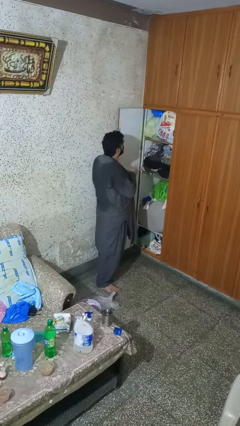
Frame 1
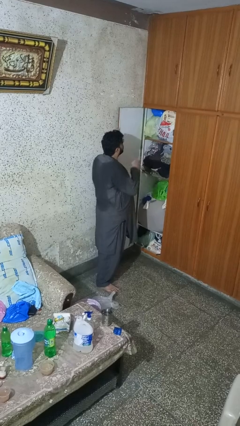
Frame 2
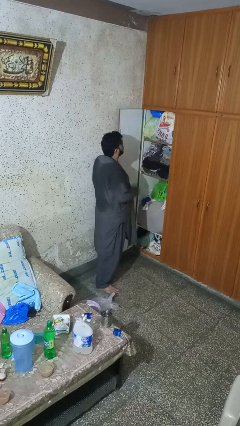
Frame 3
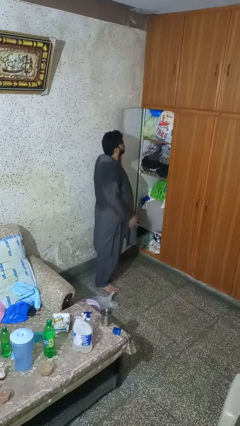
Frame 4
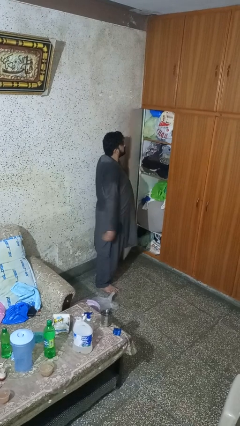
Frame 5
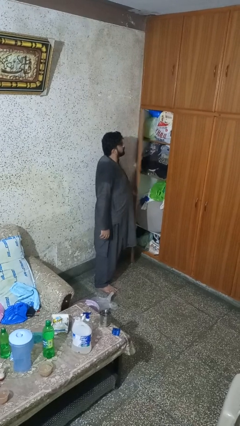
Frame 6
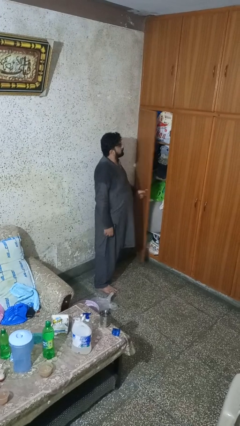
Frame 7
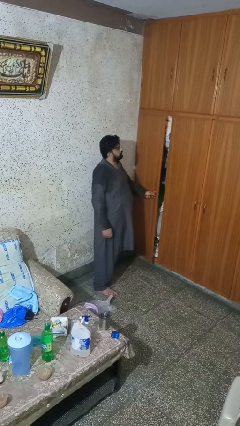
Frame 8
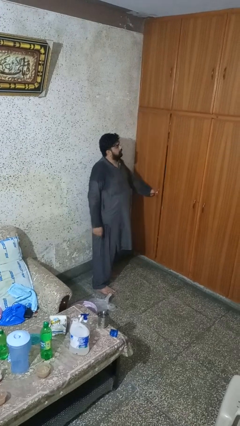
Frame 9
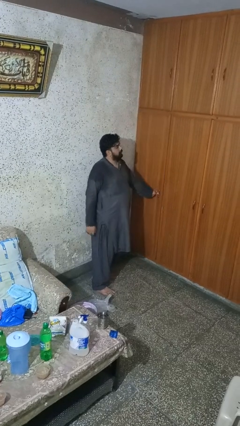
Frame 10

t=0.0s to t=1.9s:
person closes closet door

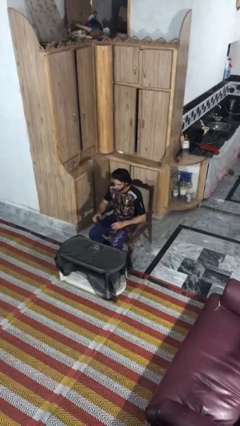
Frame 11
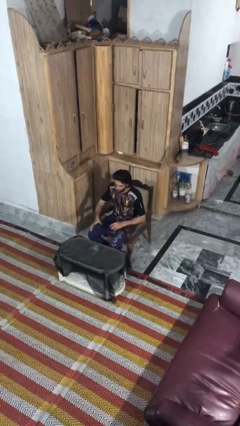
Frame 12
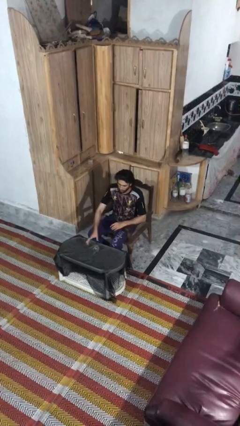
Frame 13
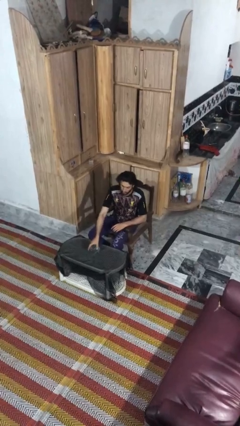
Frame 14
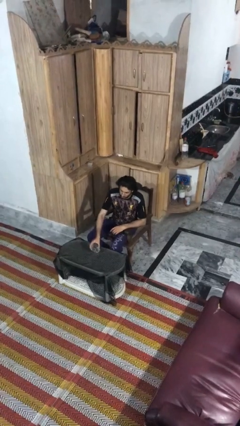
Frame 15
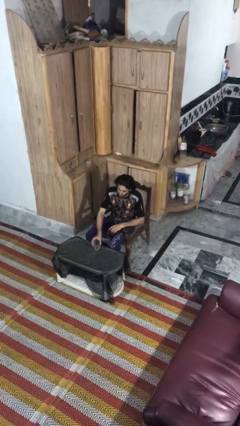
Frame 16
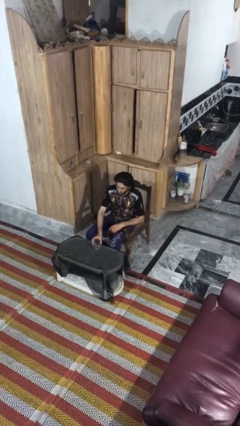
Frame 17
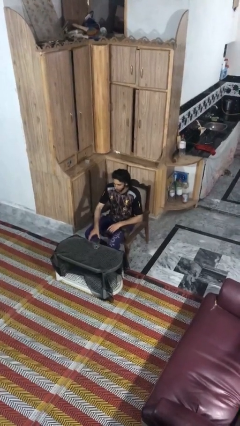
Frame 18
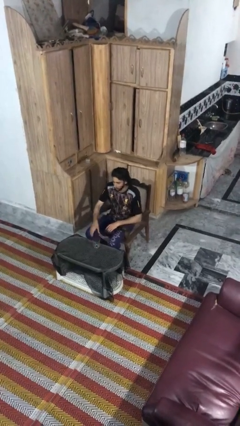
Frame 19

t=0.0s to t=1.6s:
person sets upright glass

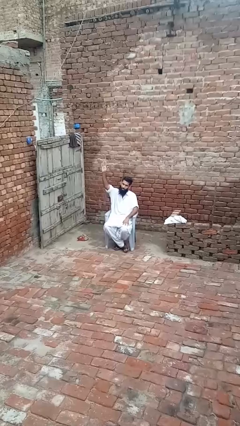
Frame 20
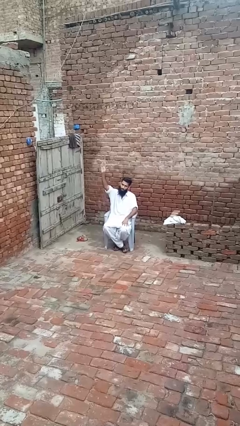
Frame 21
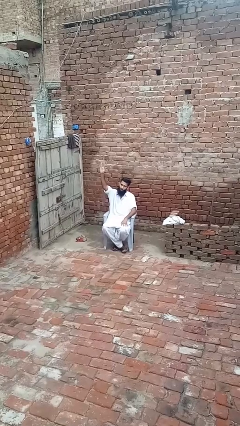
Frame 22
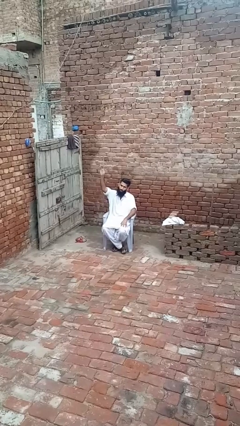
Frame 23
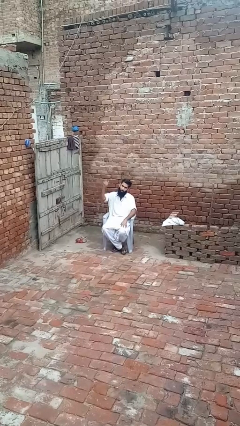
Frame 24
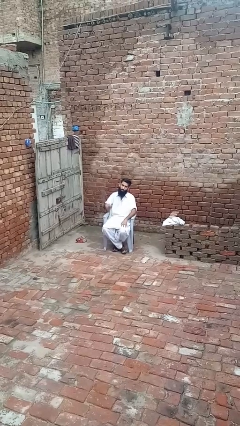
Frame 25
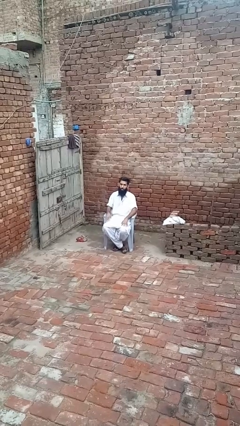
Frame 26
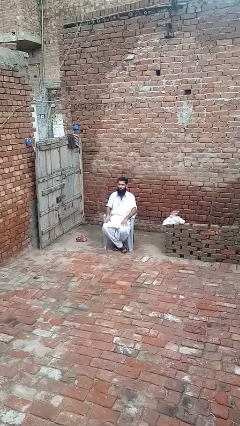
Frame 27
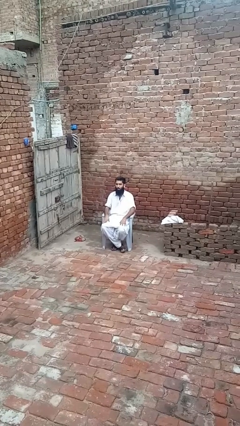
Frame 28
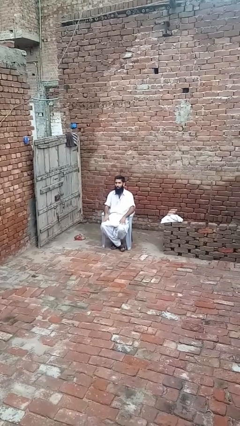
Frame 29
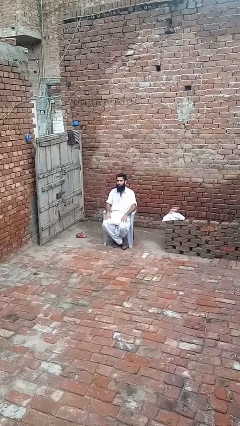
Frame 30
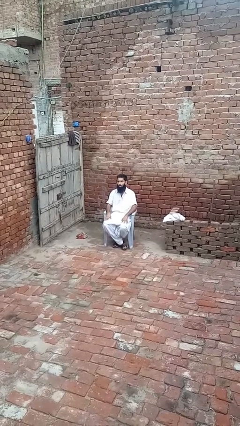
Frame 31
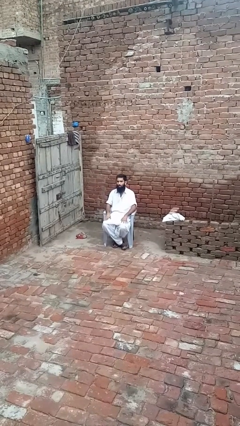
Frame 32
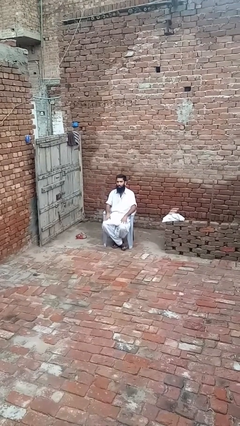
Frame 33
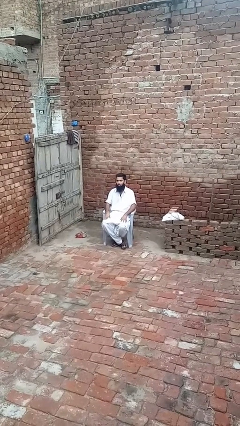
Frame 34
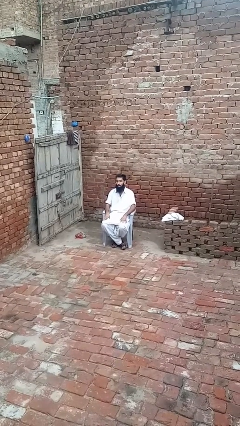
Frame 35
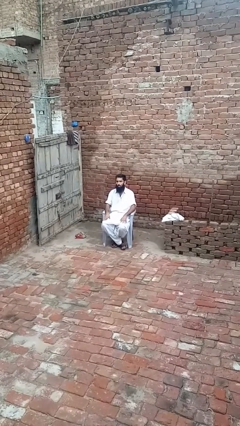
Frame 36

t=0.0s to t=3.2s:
person gestures lower hand

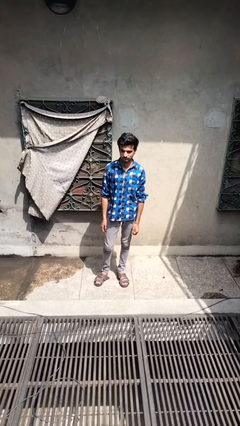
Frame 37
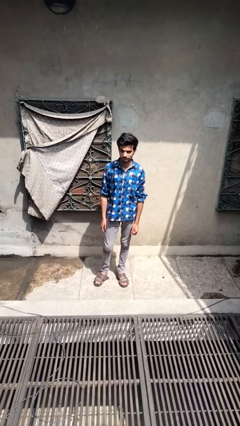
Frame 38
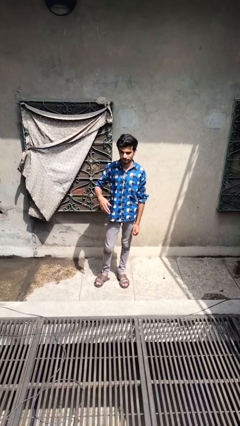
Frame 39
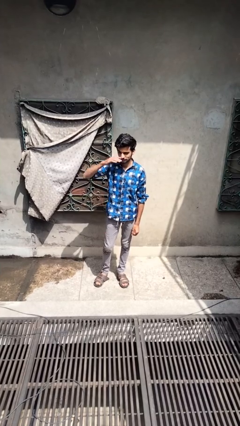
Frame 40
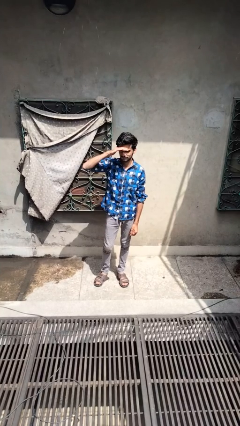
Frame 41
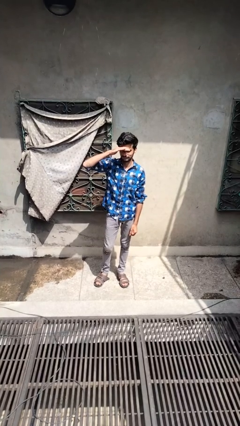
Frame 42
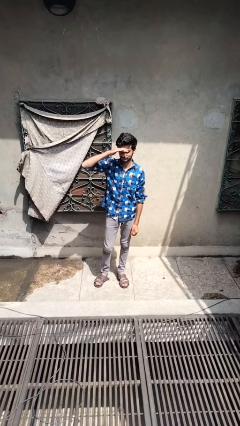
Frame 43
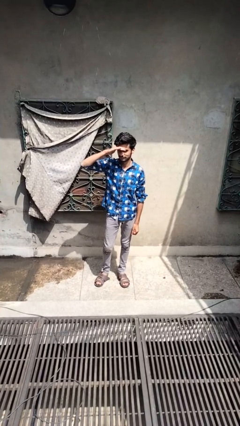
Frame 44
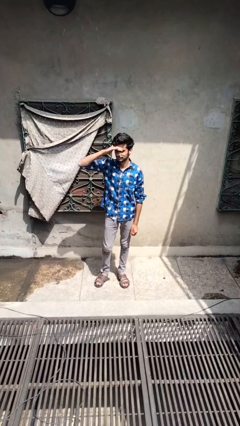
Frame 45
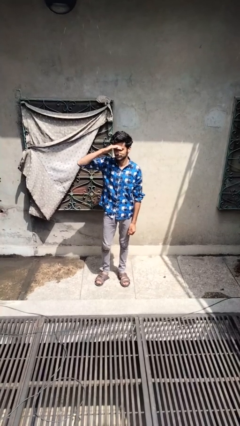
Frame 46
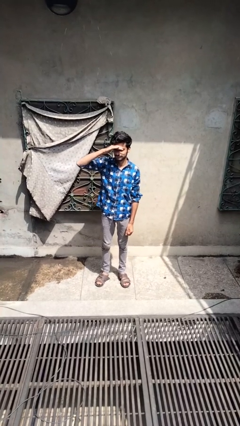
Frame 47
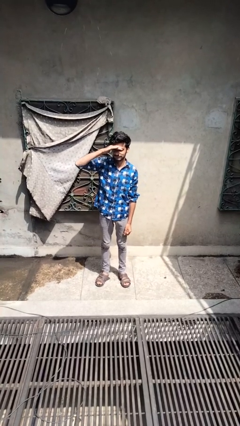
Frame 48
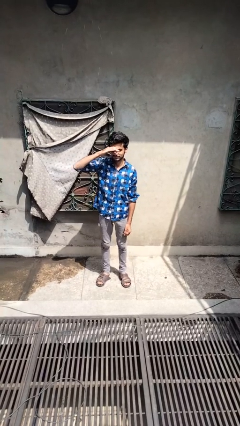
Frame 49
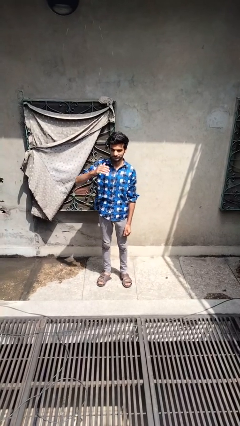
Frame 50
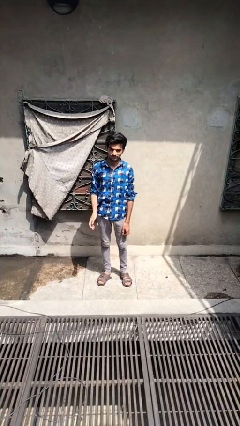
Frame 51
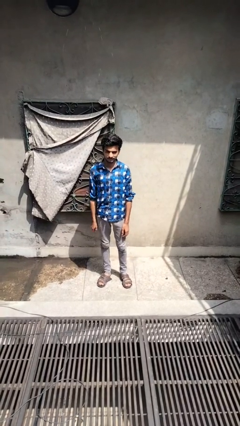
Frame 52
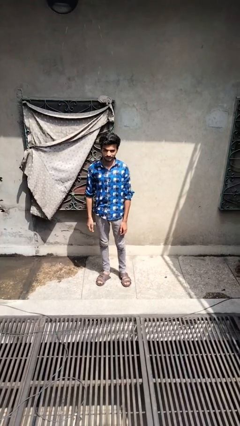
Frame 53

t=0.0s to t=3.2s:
person shades eyes

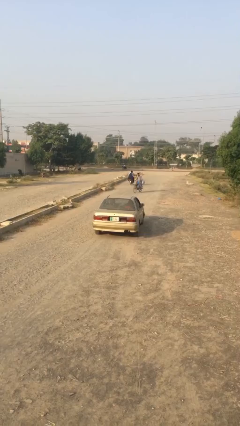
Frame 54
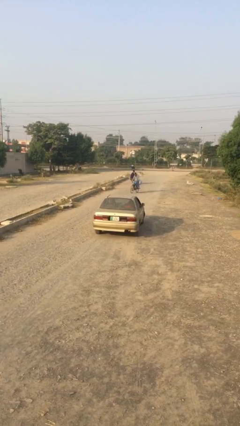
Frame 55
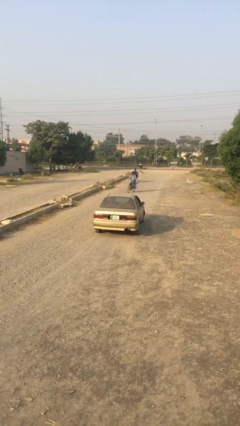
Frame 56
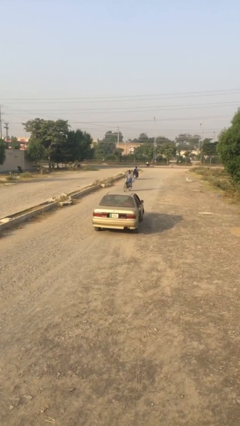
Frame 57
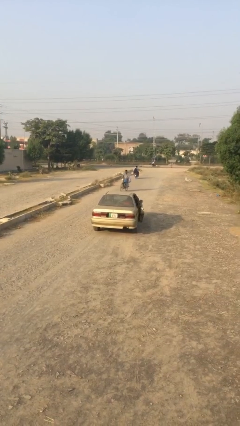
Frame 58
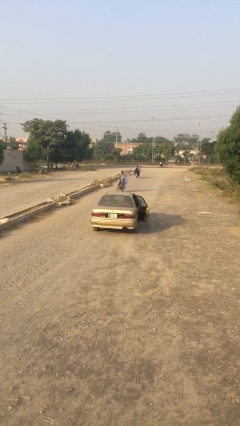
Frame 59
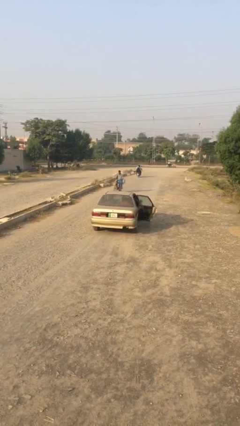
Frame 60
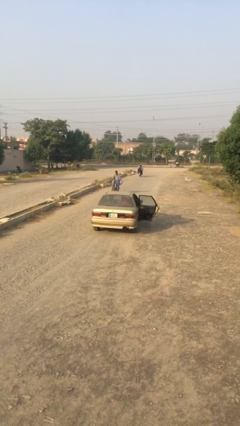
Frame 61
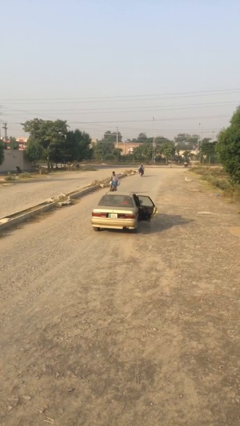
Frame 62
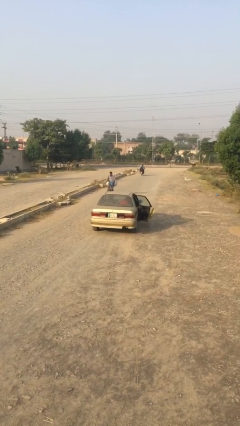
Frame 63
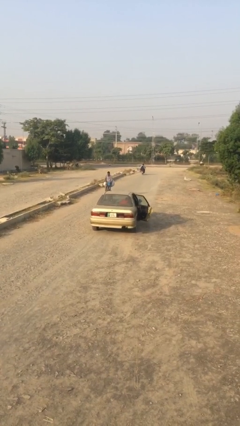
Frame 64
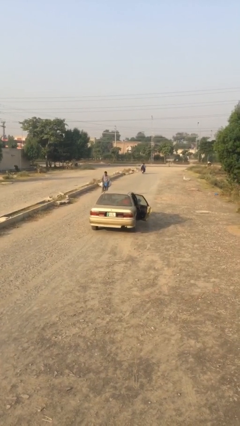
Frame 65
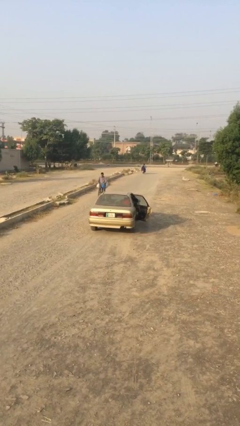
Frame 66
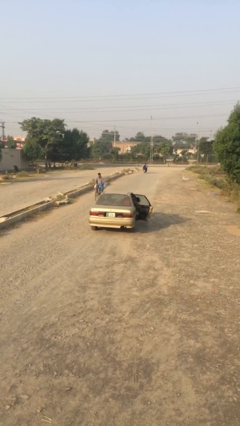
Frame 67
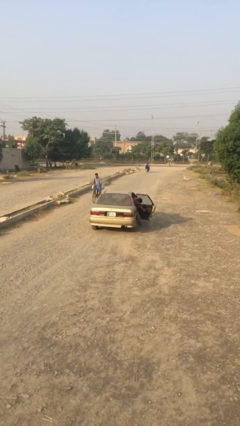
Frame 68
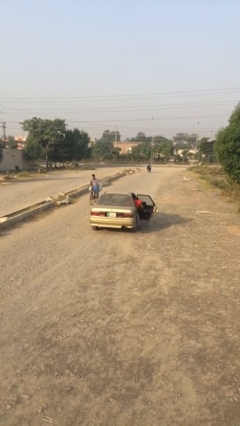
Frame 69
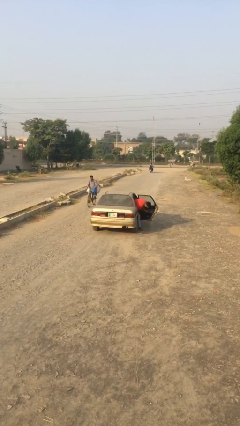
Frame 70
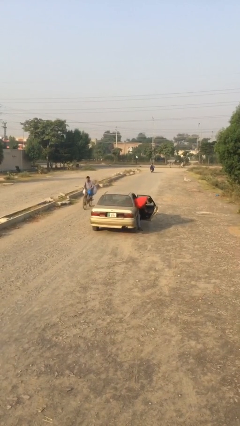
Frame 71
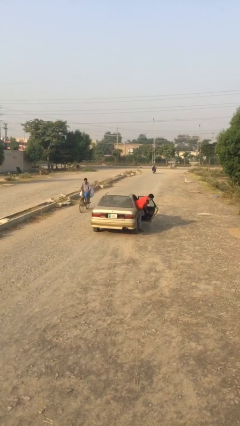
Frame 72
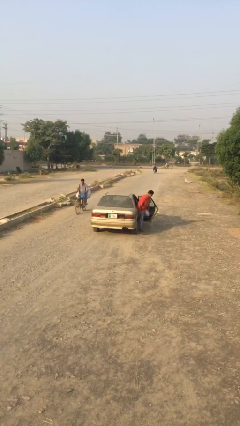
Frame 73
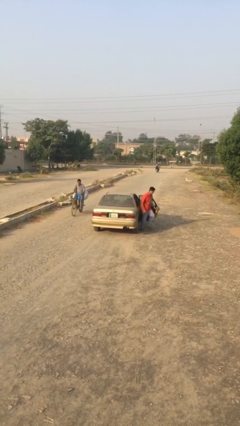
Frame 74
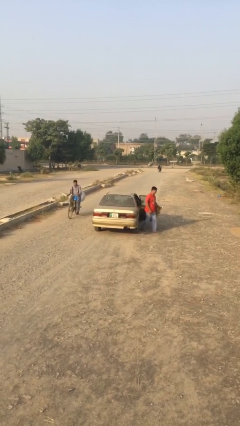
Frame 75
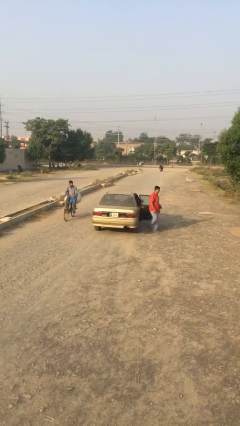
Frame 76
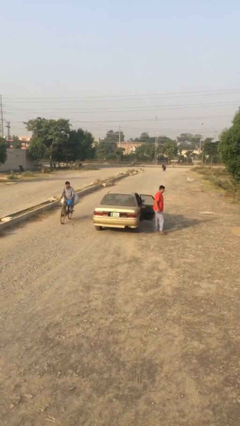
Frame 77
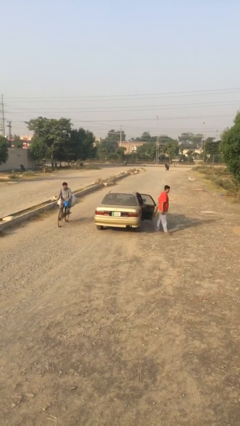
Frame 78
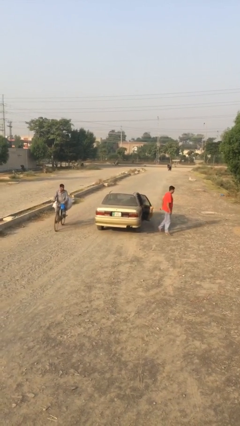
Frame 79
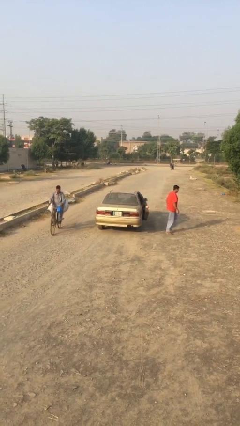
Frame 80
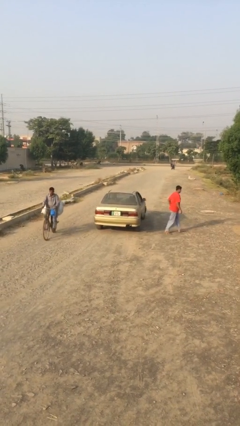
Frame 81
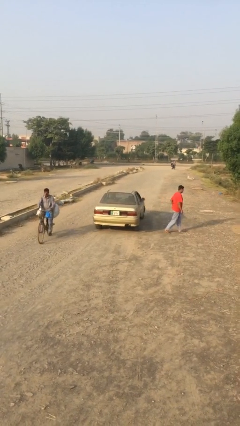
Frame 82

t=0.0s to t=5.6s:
car drops off person

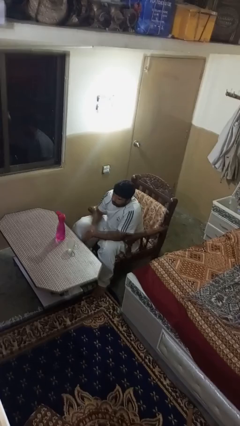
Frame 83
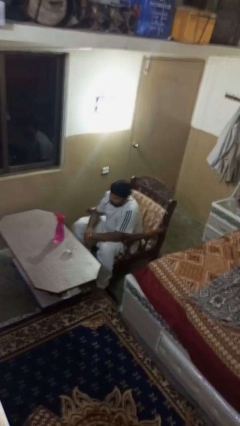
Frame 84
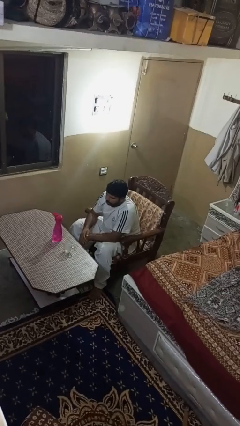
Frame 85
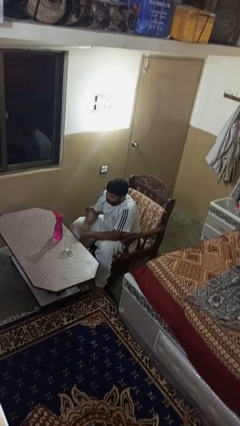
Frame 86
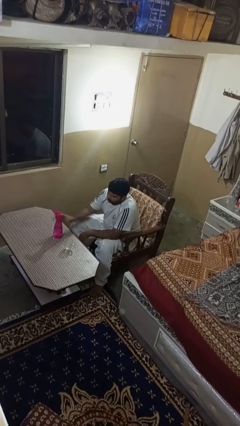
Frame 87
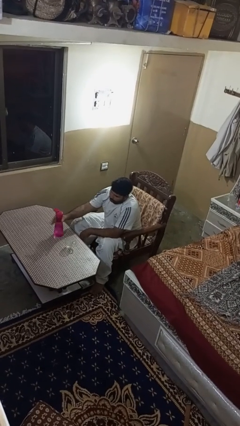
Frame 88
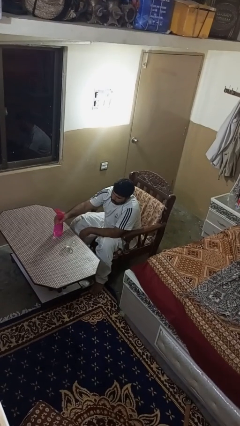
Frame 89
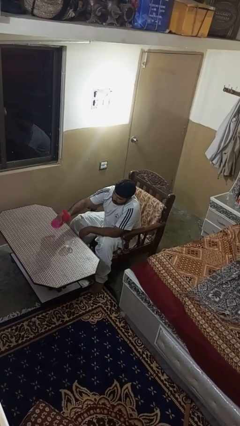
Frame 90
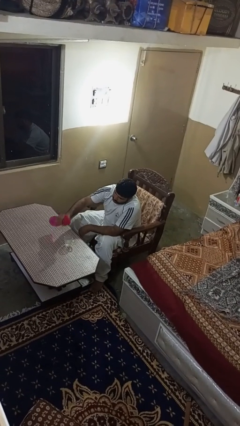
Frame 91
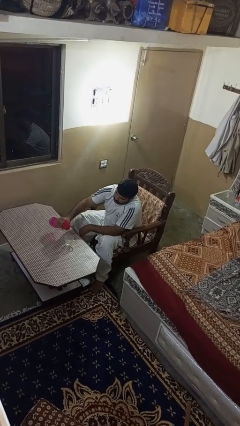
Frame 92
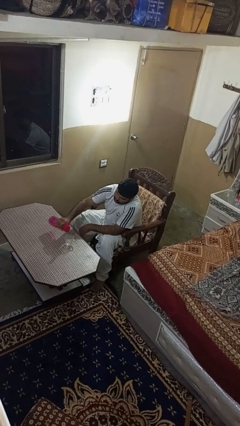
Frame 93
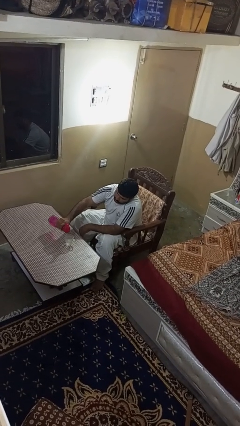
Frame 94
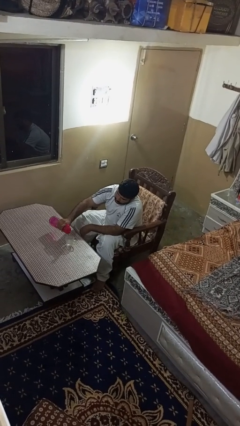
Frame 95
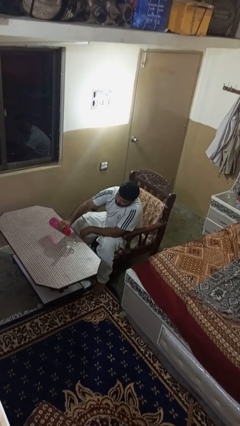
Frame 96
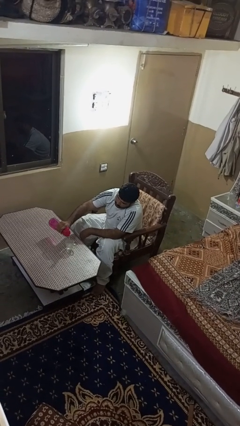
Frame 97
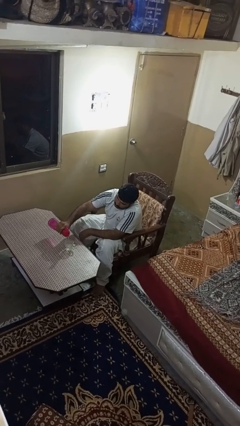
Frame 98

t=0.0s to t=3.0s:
person pours liquid into cup
